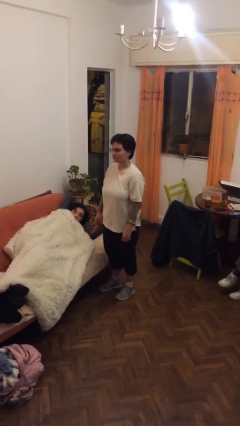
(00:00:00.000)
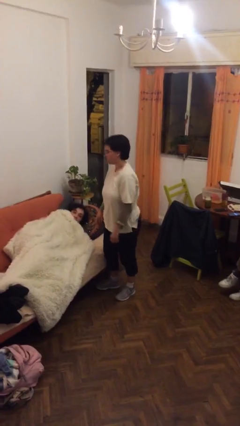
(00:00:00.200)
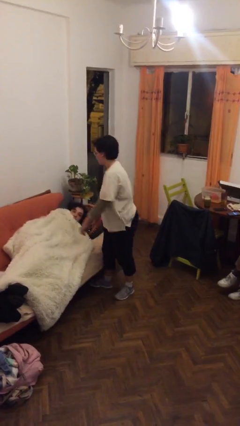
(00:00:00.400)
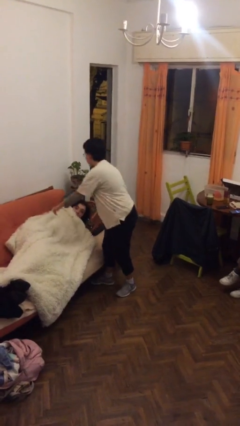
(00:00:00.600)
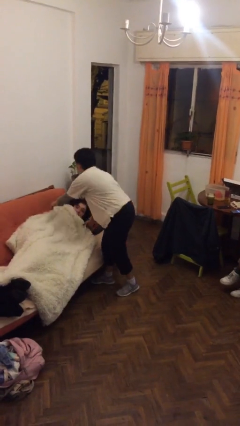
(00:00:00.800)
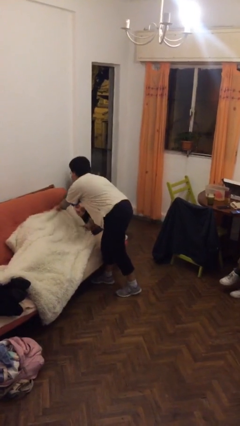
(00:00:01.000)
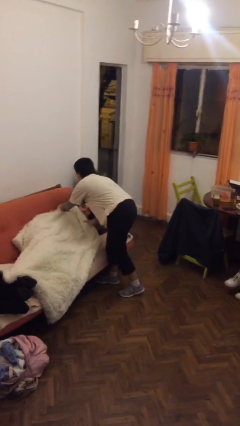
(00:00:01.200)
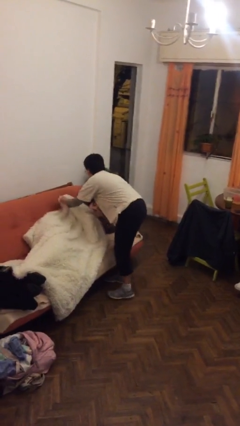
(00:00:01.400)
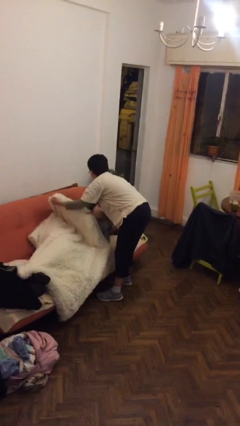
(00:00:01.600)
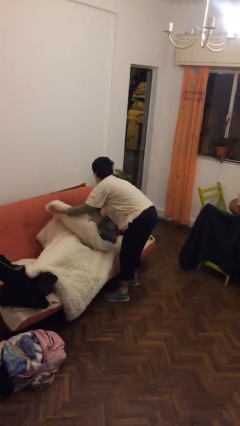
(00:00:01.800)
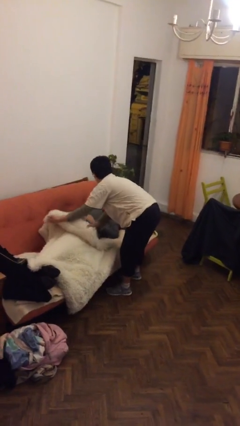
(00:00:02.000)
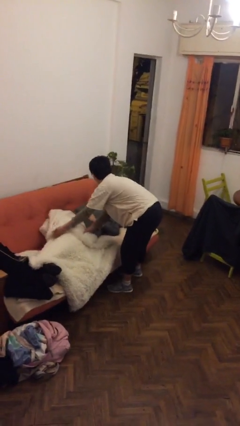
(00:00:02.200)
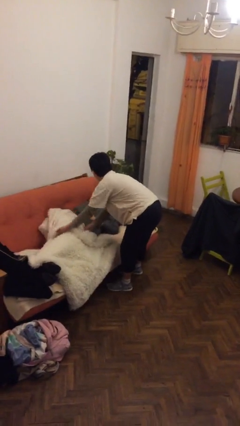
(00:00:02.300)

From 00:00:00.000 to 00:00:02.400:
person uncovers friend with blanket

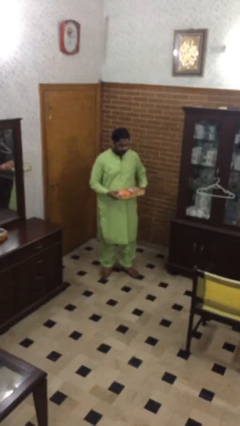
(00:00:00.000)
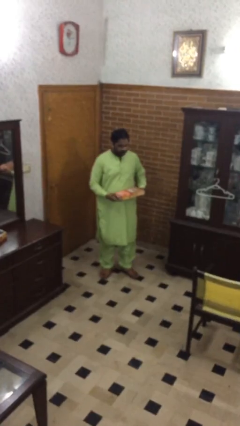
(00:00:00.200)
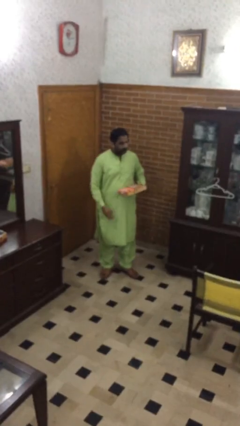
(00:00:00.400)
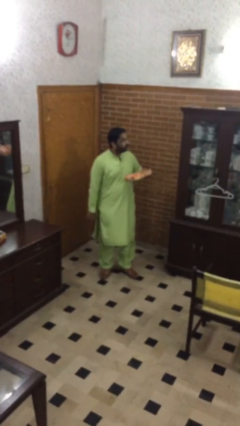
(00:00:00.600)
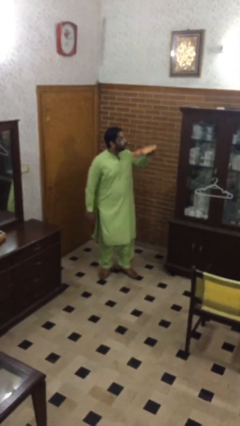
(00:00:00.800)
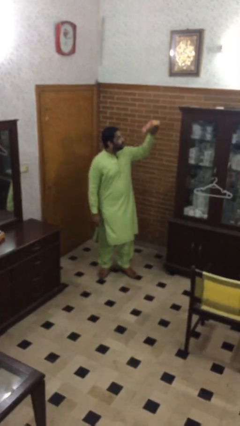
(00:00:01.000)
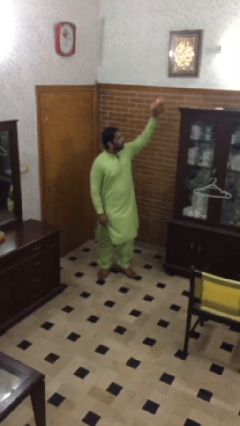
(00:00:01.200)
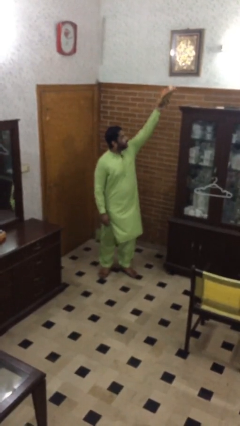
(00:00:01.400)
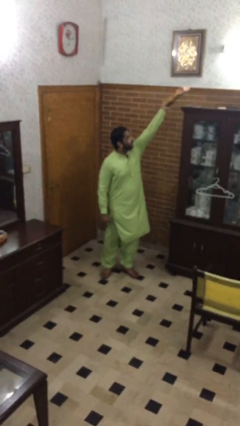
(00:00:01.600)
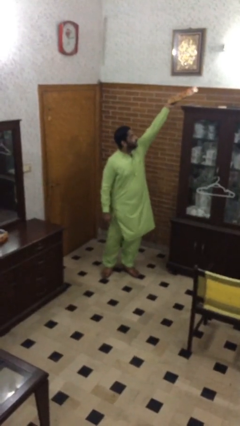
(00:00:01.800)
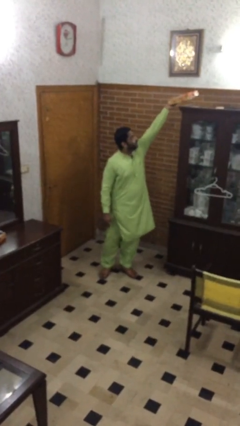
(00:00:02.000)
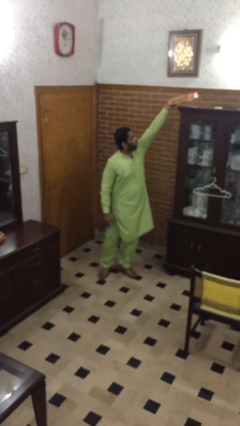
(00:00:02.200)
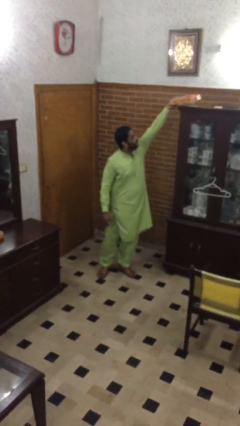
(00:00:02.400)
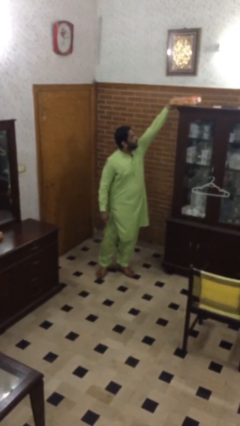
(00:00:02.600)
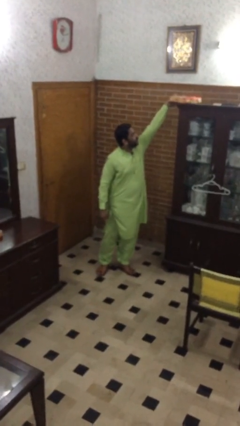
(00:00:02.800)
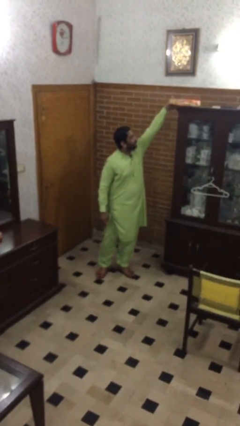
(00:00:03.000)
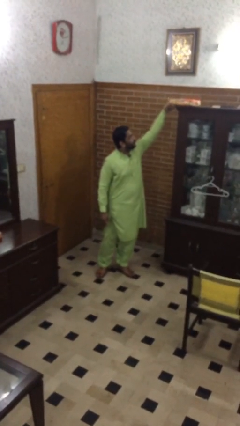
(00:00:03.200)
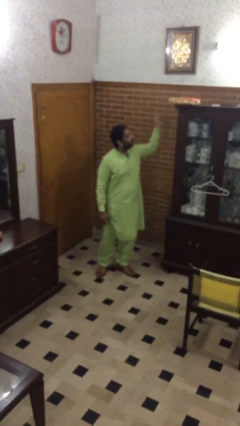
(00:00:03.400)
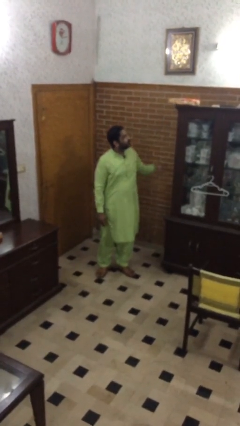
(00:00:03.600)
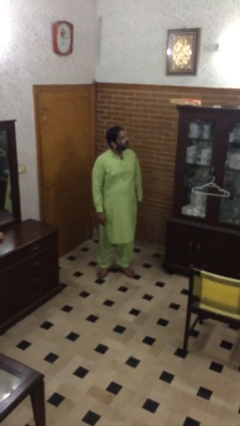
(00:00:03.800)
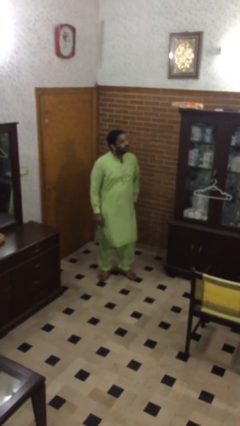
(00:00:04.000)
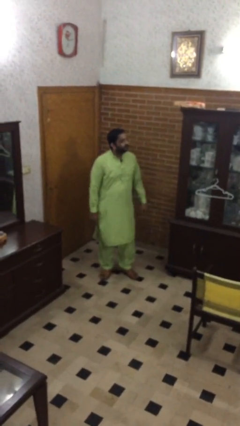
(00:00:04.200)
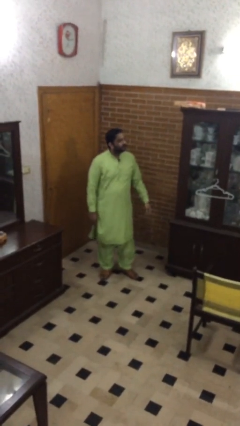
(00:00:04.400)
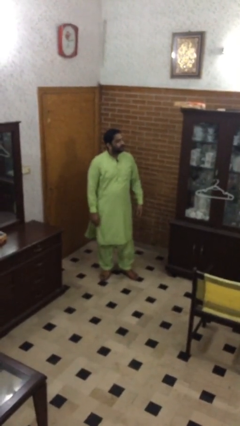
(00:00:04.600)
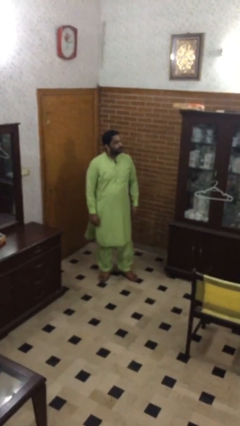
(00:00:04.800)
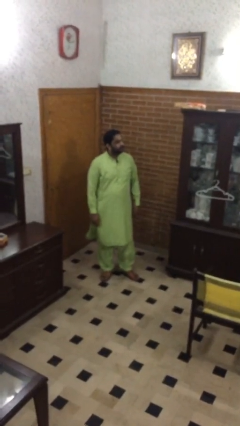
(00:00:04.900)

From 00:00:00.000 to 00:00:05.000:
person puts down object on shelf

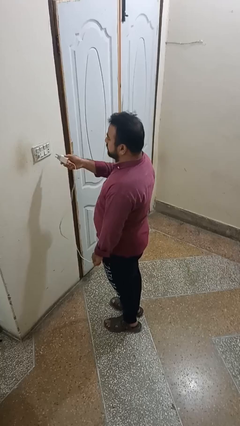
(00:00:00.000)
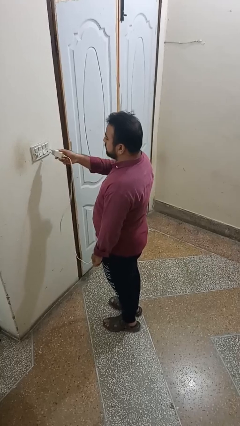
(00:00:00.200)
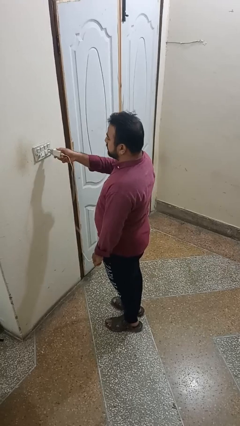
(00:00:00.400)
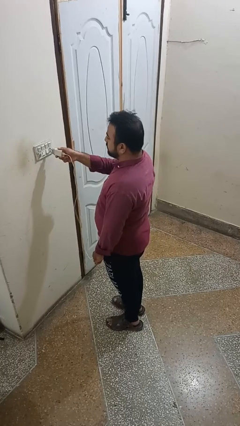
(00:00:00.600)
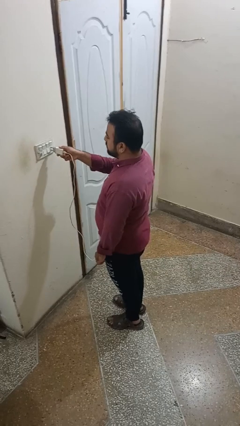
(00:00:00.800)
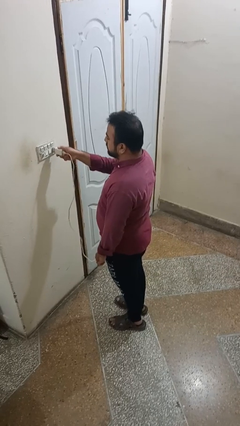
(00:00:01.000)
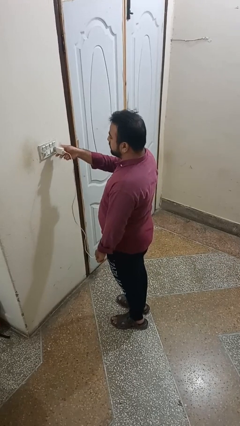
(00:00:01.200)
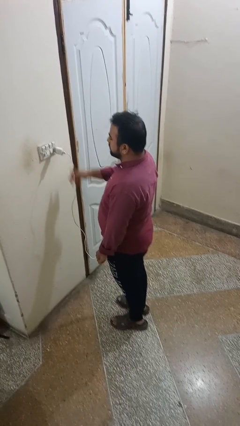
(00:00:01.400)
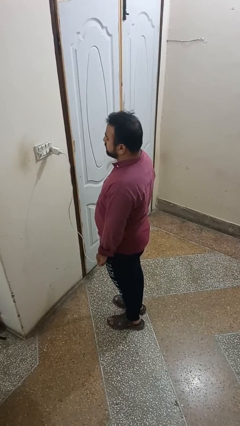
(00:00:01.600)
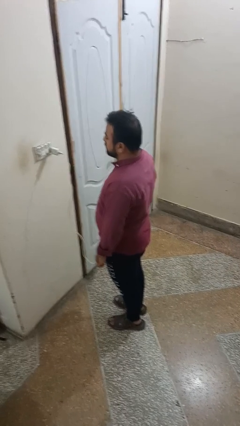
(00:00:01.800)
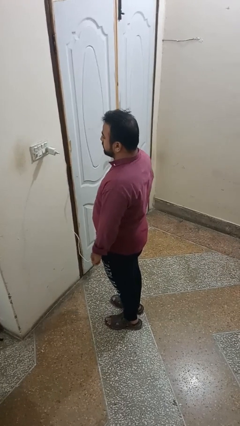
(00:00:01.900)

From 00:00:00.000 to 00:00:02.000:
person plugs into electrical socket

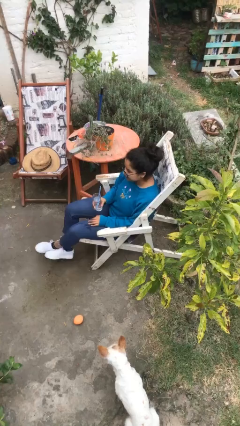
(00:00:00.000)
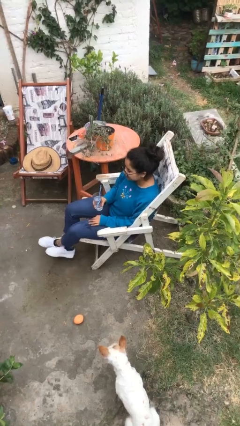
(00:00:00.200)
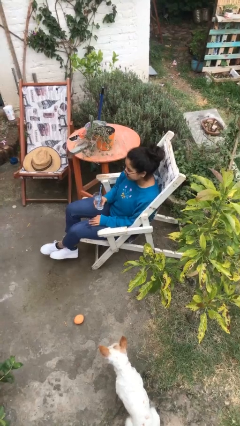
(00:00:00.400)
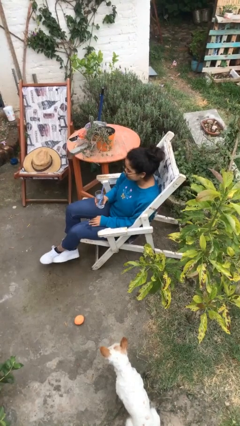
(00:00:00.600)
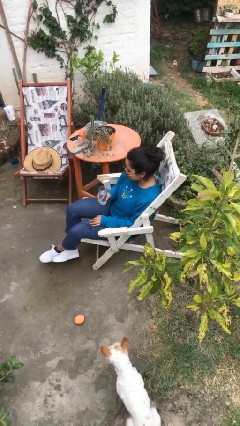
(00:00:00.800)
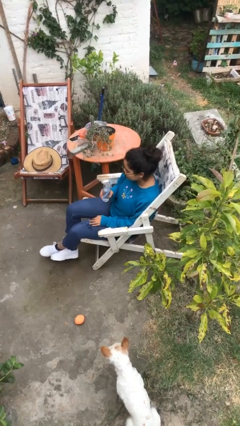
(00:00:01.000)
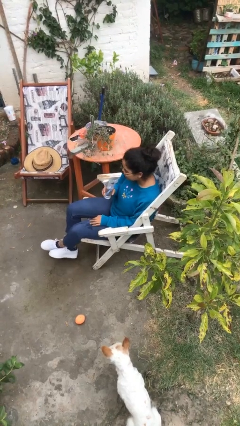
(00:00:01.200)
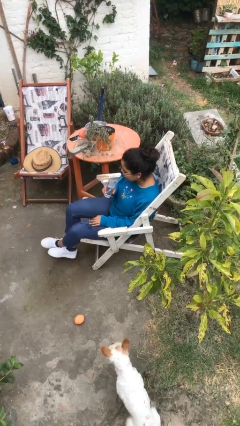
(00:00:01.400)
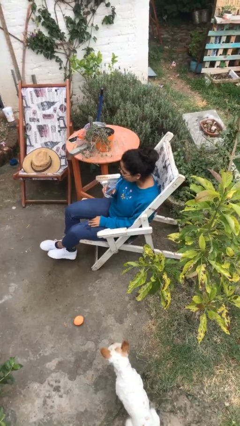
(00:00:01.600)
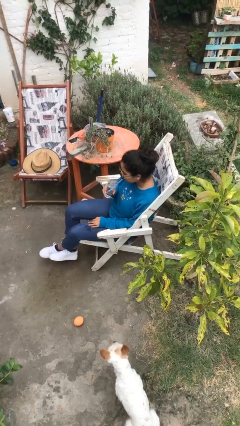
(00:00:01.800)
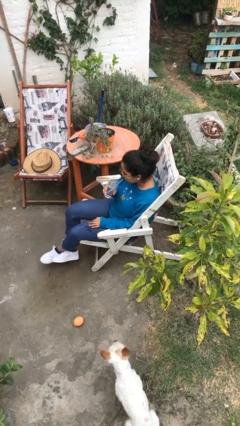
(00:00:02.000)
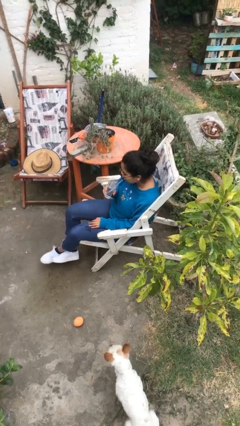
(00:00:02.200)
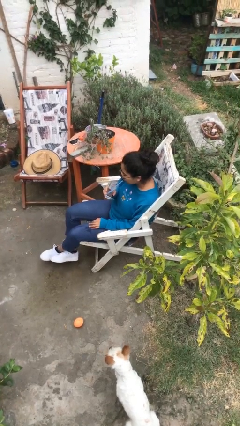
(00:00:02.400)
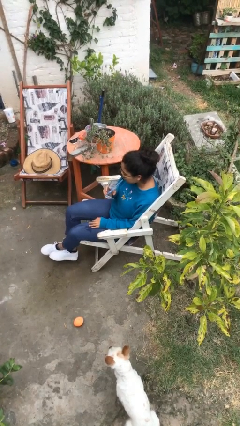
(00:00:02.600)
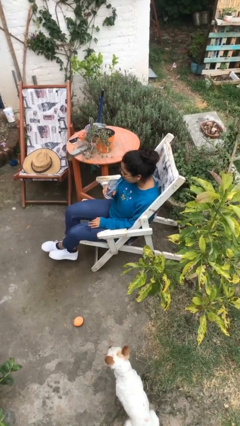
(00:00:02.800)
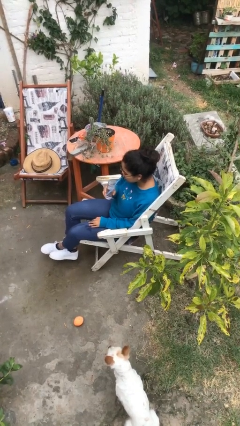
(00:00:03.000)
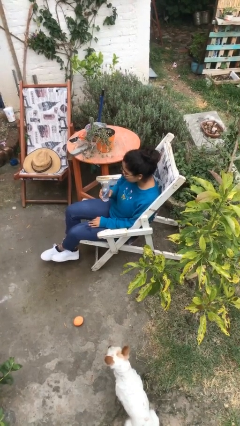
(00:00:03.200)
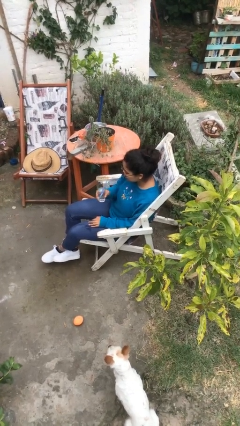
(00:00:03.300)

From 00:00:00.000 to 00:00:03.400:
person drinks from straw

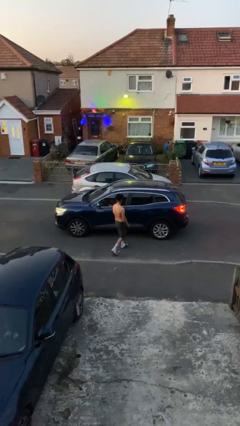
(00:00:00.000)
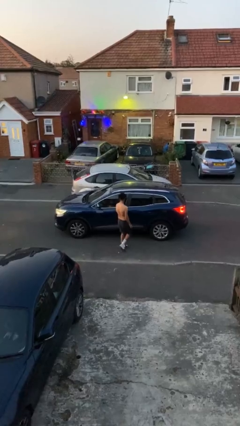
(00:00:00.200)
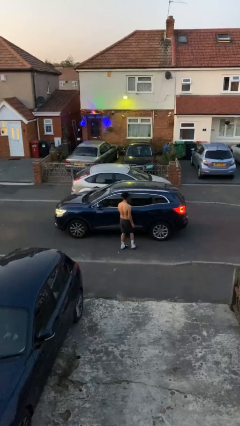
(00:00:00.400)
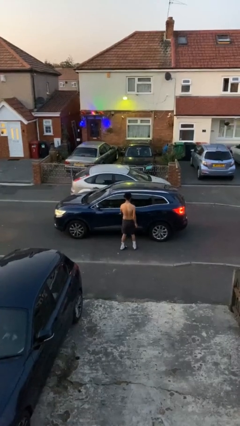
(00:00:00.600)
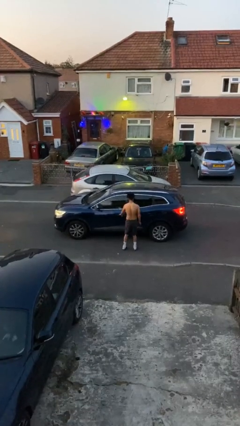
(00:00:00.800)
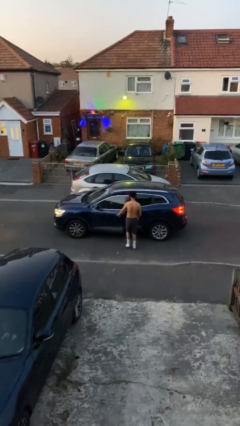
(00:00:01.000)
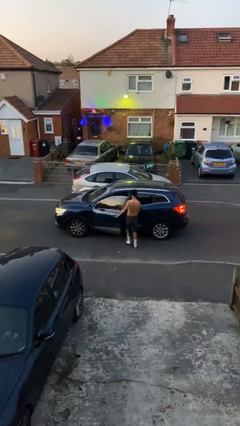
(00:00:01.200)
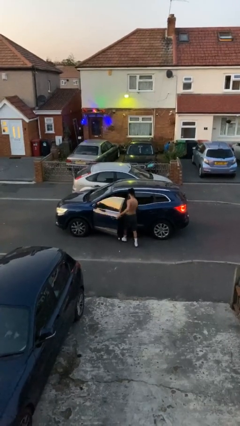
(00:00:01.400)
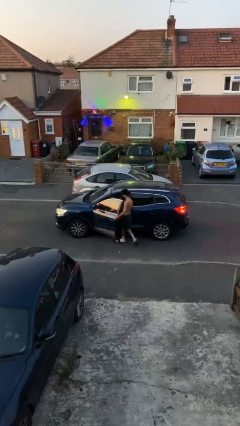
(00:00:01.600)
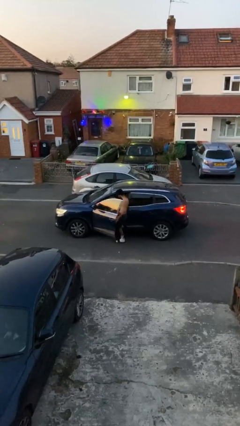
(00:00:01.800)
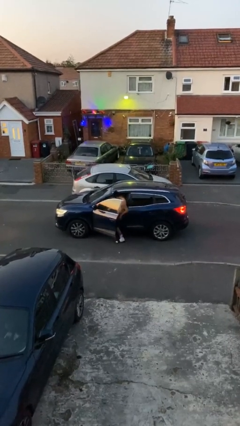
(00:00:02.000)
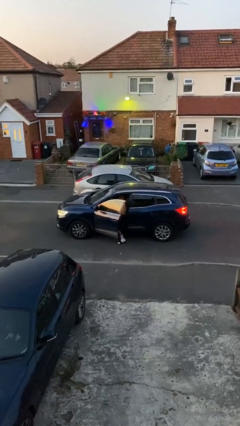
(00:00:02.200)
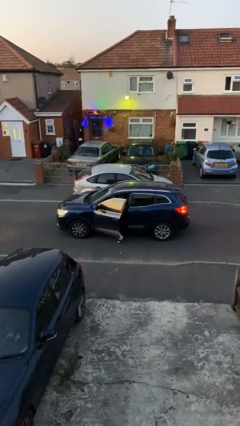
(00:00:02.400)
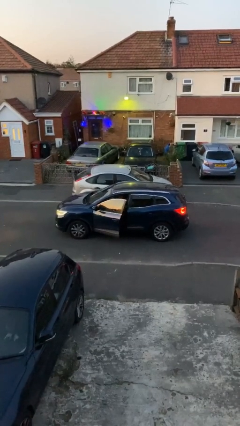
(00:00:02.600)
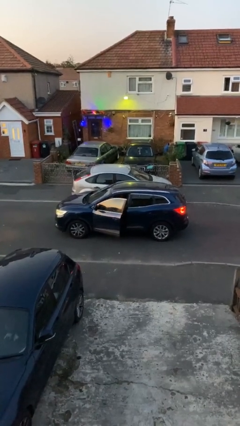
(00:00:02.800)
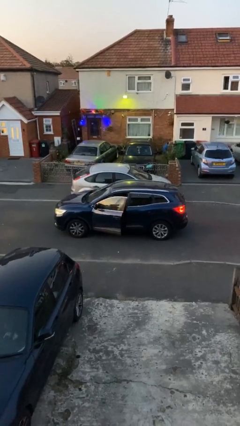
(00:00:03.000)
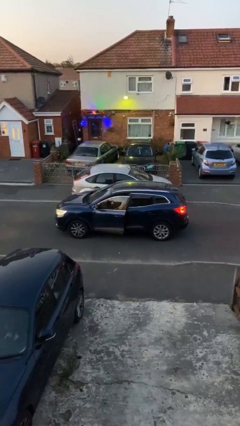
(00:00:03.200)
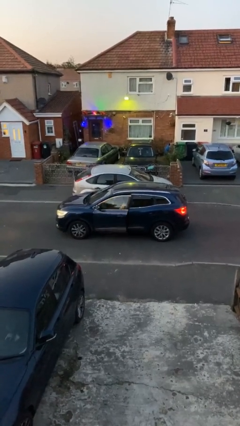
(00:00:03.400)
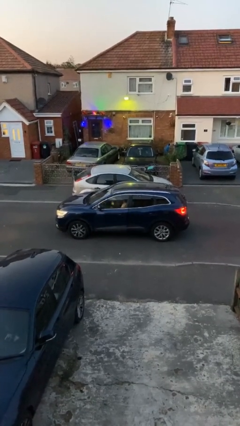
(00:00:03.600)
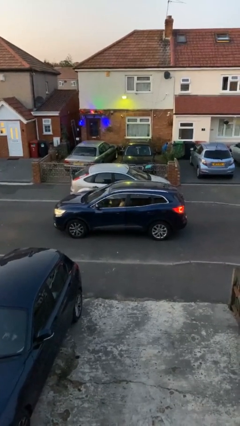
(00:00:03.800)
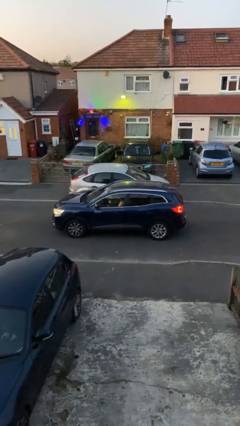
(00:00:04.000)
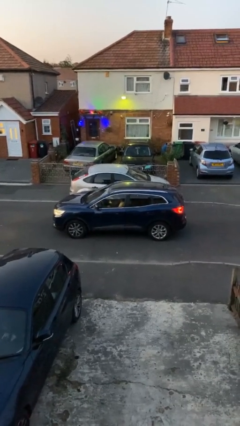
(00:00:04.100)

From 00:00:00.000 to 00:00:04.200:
car picks up person
